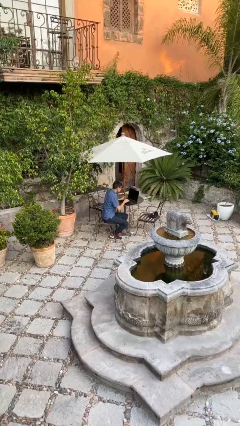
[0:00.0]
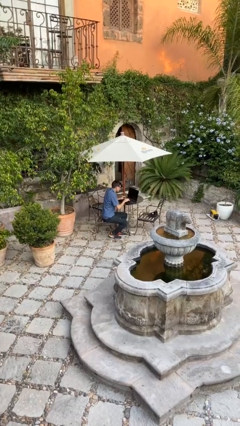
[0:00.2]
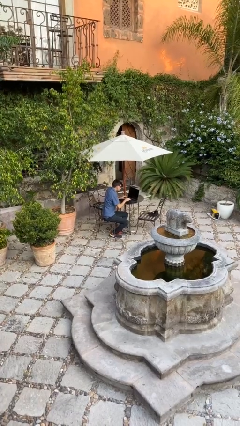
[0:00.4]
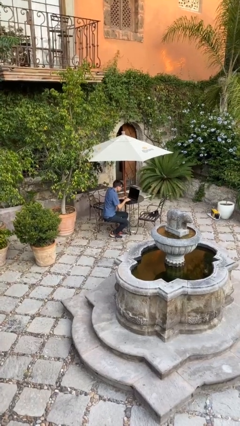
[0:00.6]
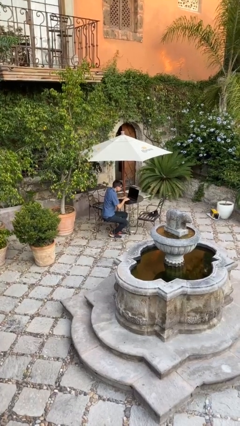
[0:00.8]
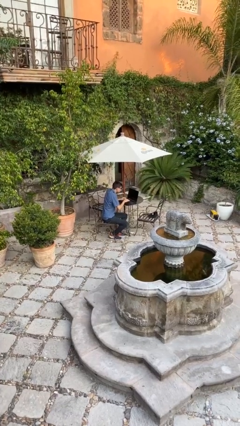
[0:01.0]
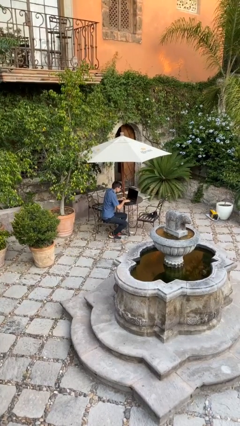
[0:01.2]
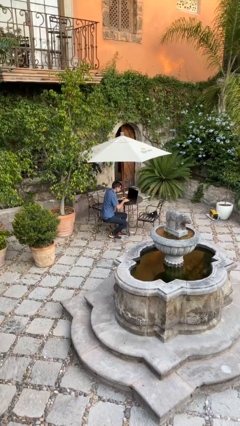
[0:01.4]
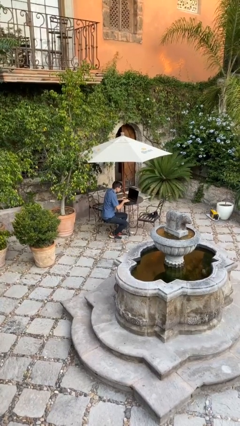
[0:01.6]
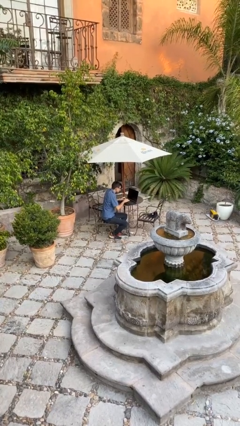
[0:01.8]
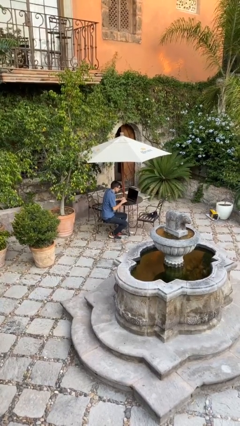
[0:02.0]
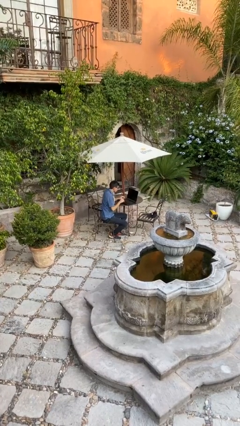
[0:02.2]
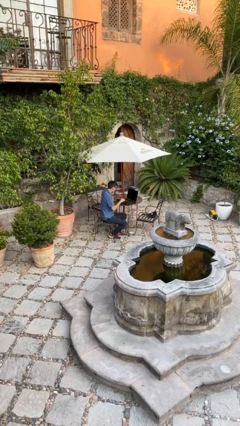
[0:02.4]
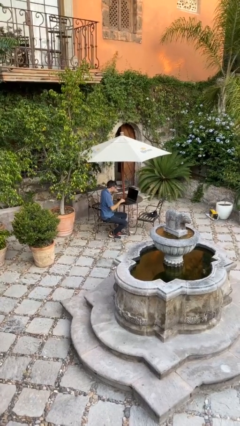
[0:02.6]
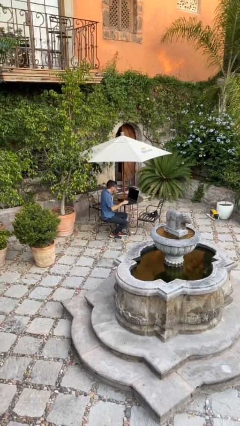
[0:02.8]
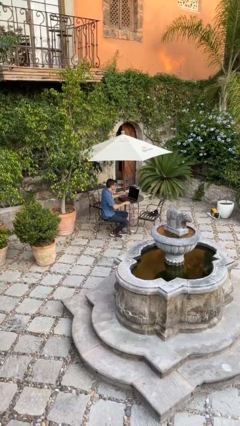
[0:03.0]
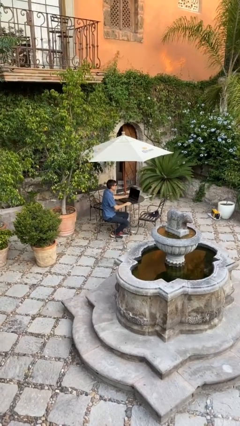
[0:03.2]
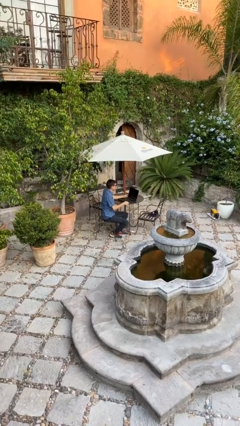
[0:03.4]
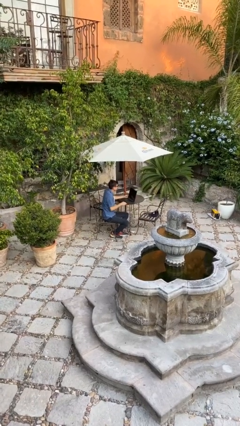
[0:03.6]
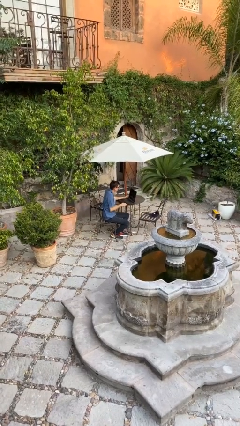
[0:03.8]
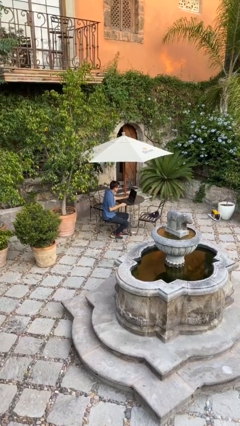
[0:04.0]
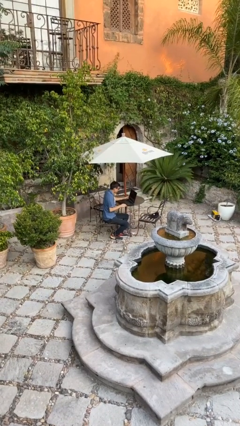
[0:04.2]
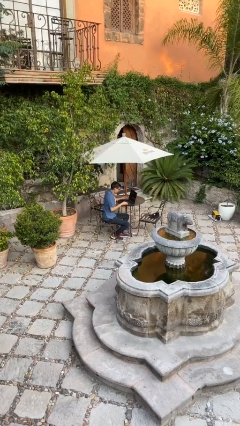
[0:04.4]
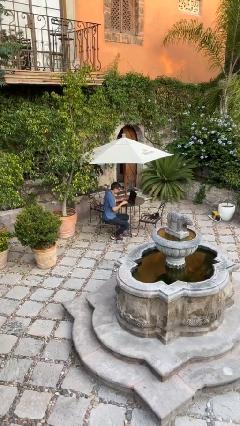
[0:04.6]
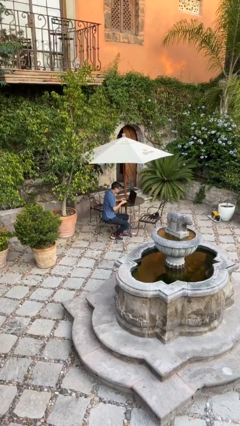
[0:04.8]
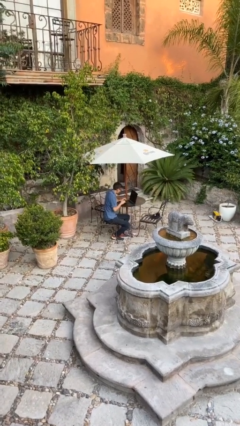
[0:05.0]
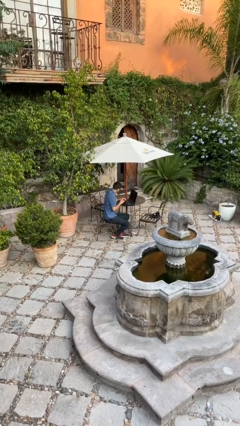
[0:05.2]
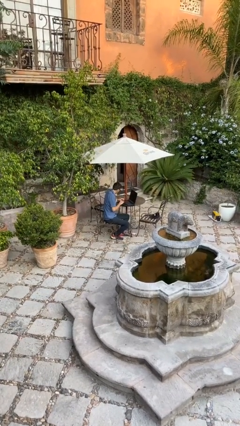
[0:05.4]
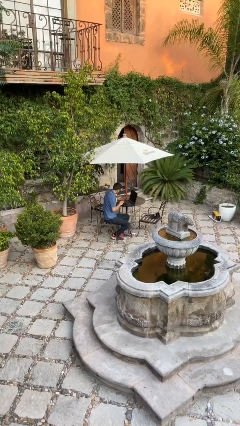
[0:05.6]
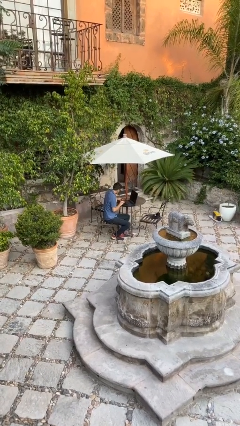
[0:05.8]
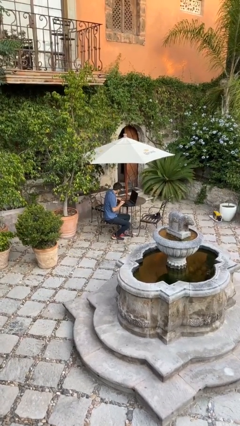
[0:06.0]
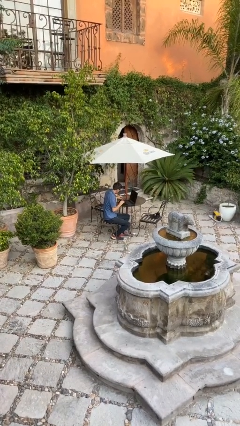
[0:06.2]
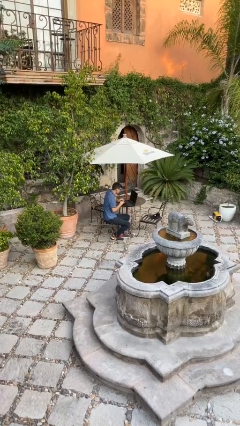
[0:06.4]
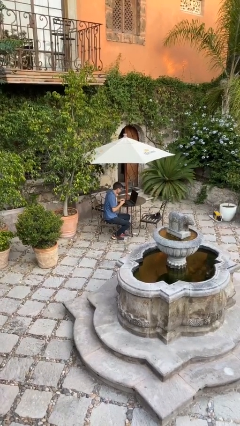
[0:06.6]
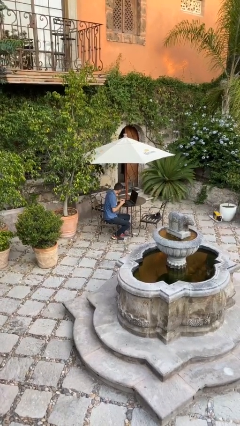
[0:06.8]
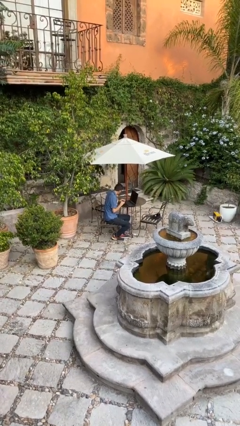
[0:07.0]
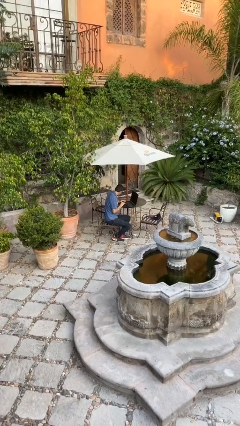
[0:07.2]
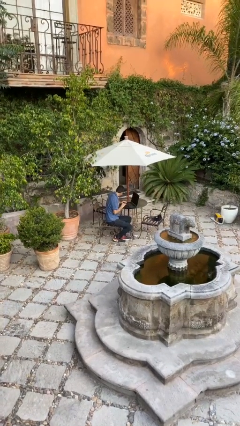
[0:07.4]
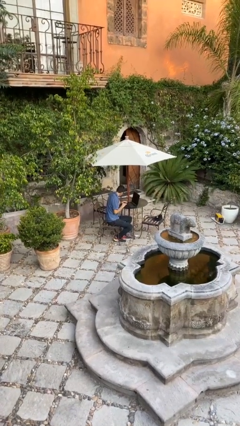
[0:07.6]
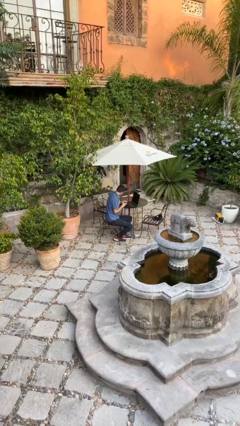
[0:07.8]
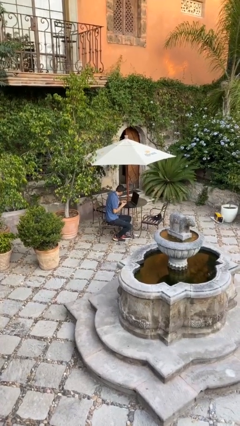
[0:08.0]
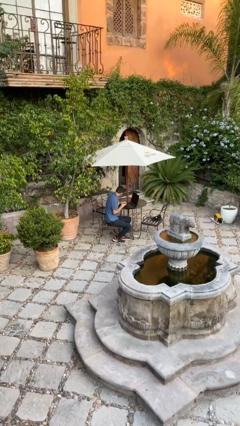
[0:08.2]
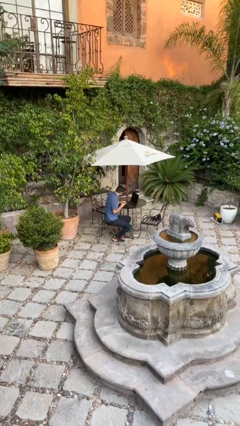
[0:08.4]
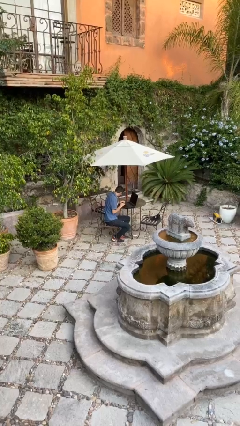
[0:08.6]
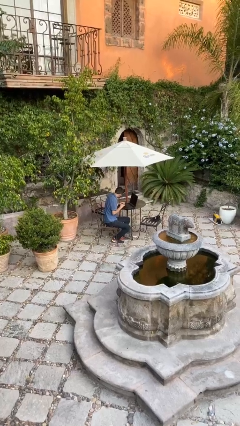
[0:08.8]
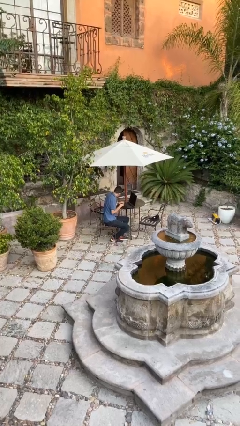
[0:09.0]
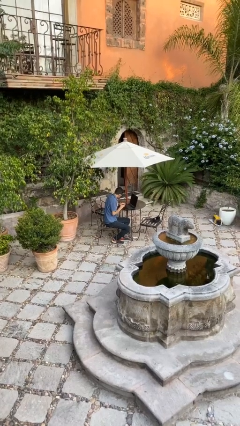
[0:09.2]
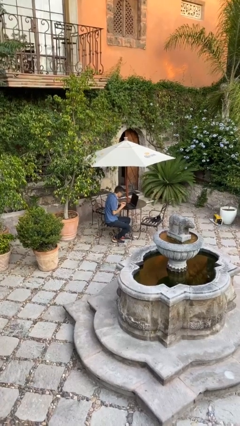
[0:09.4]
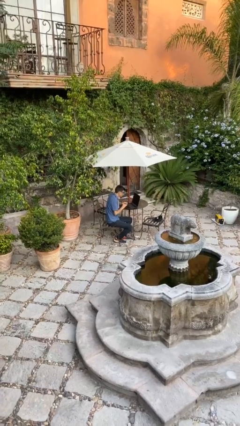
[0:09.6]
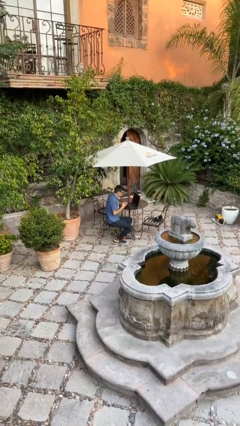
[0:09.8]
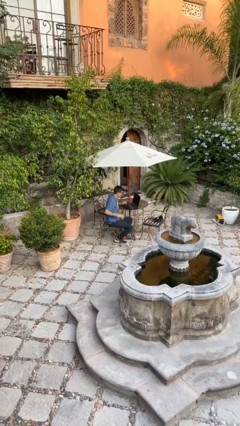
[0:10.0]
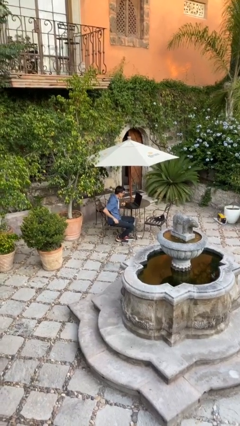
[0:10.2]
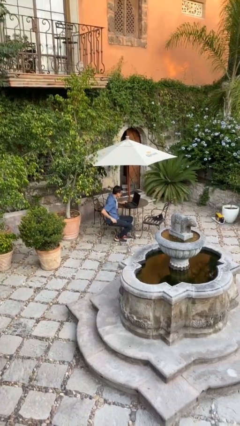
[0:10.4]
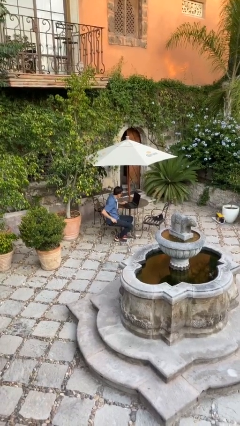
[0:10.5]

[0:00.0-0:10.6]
person interacts with laptop

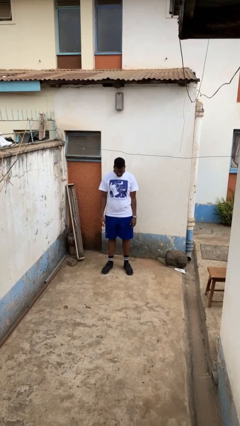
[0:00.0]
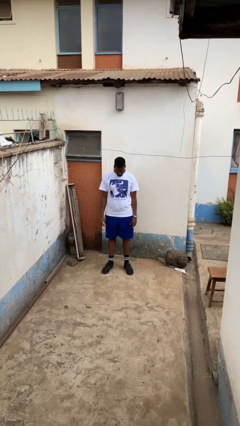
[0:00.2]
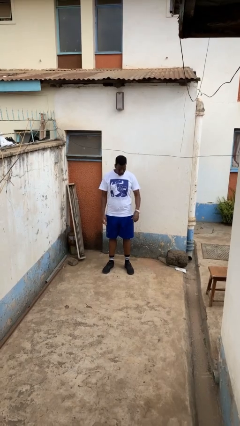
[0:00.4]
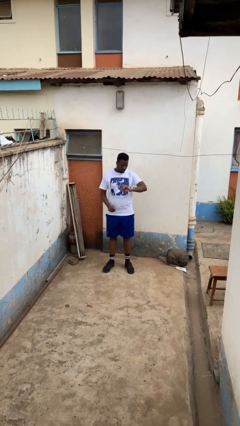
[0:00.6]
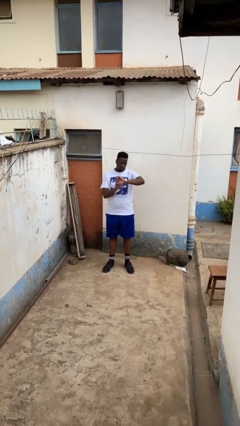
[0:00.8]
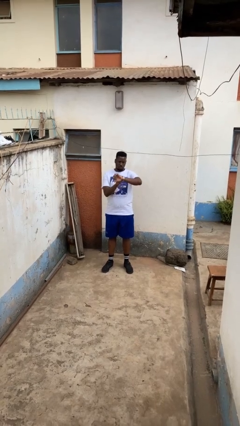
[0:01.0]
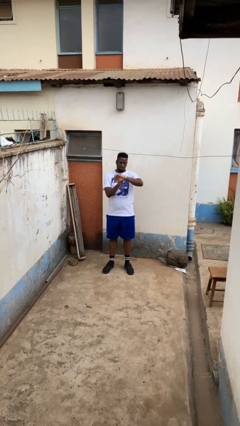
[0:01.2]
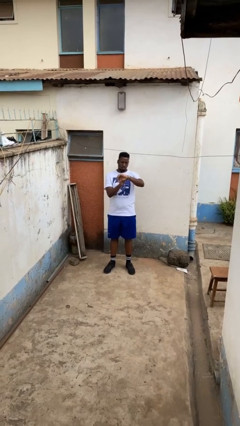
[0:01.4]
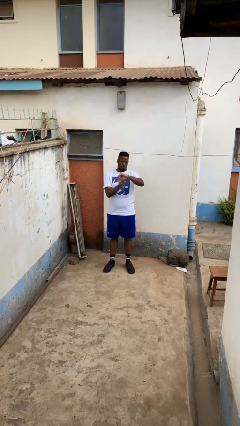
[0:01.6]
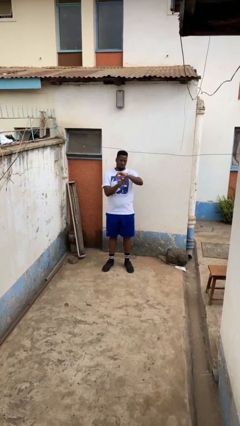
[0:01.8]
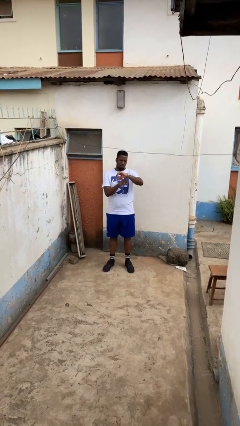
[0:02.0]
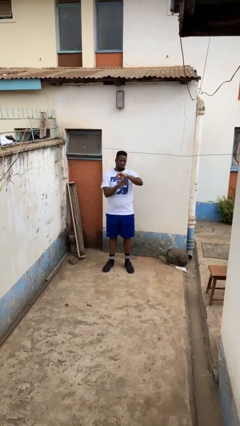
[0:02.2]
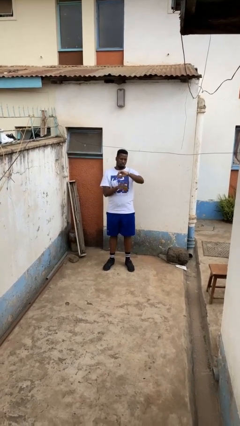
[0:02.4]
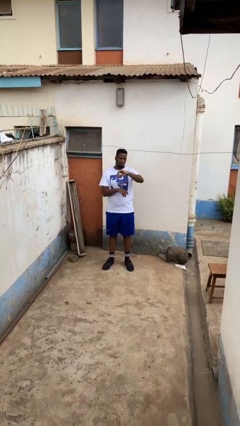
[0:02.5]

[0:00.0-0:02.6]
person looks at wristwatch

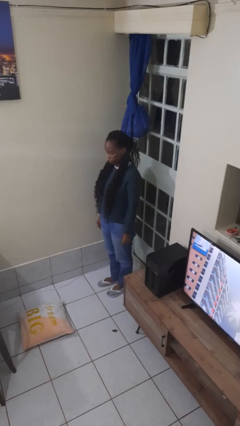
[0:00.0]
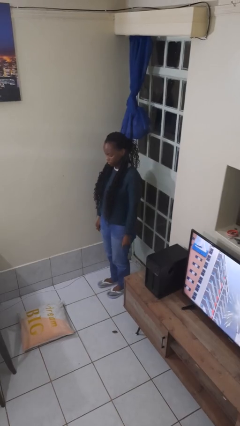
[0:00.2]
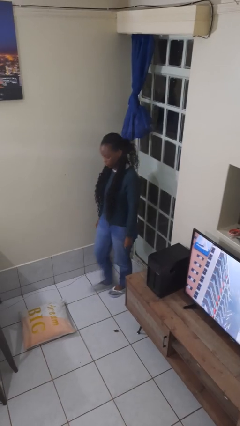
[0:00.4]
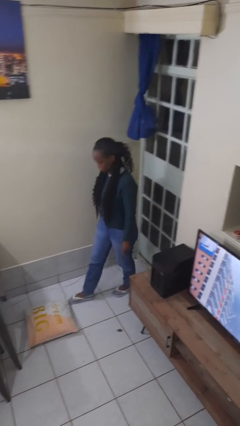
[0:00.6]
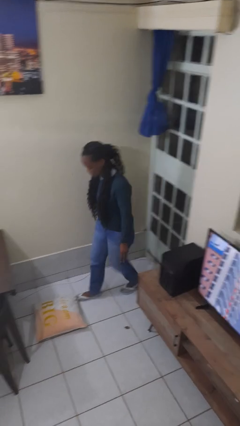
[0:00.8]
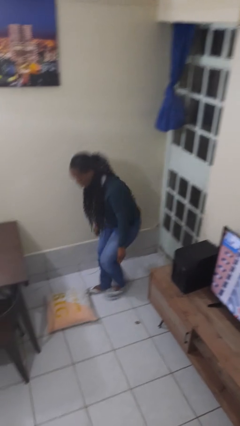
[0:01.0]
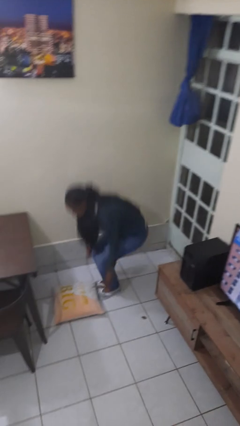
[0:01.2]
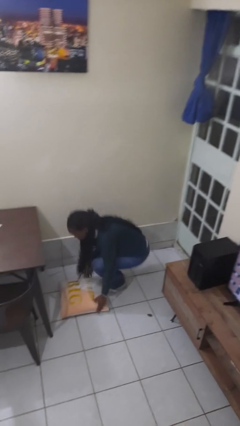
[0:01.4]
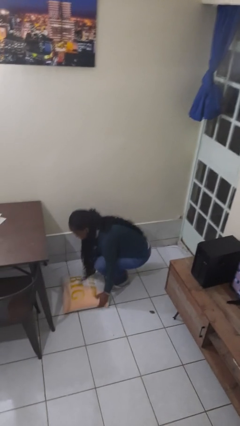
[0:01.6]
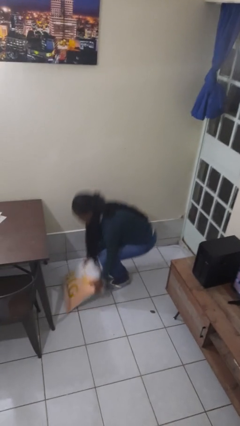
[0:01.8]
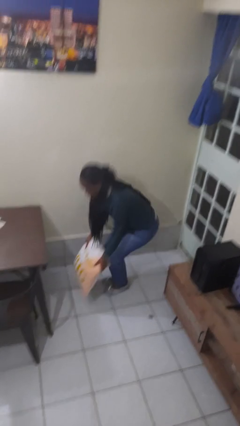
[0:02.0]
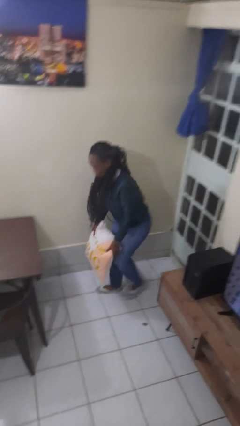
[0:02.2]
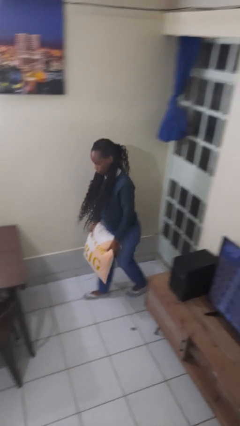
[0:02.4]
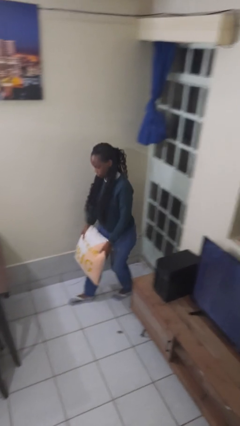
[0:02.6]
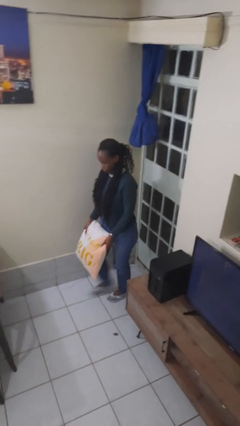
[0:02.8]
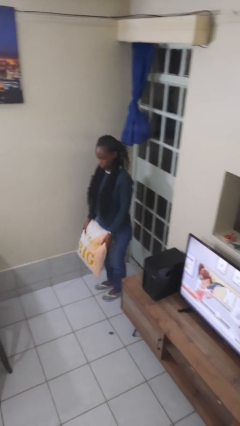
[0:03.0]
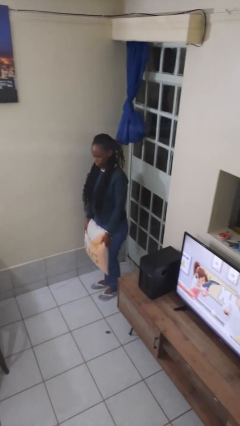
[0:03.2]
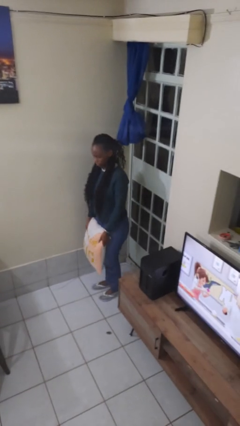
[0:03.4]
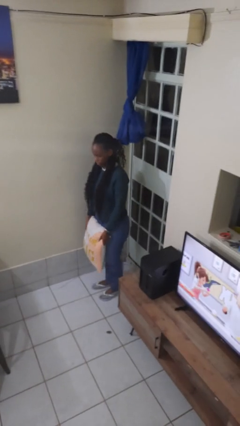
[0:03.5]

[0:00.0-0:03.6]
person picks up object from floor

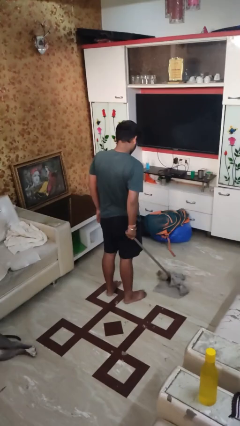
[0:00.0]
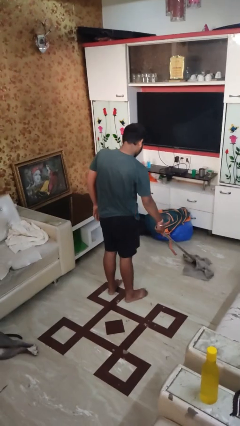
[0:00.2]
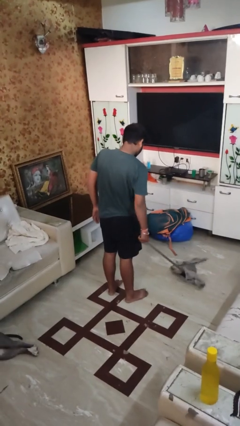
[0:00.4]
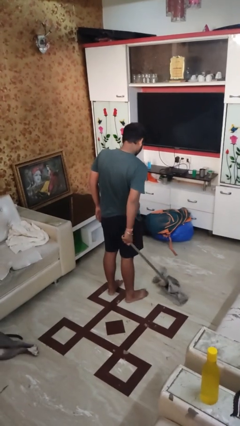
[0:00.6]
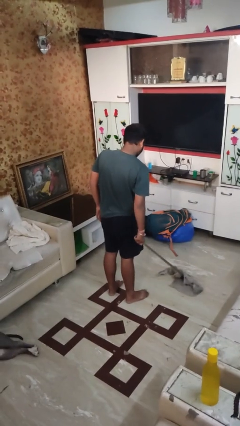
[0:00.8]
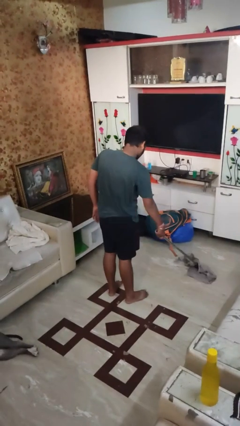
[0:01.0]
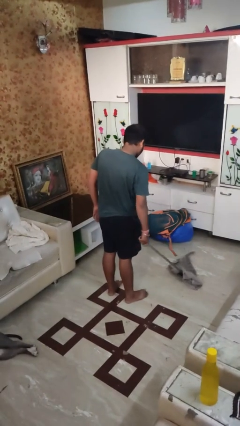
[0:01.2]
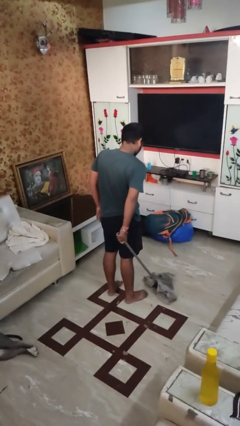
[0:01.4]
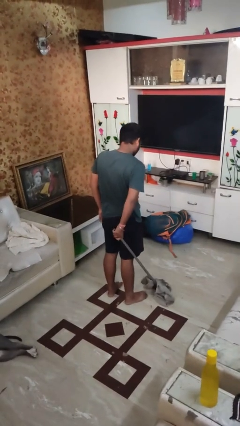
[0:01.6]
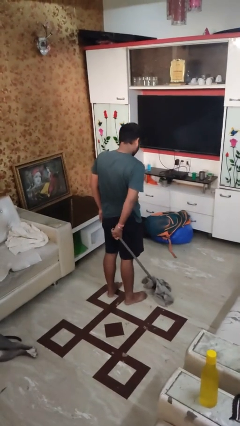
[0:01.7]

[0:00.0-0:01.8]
person mops
